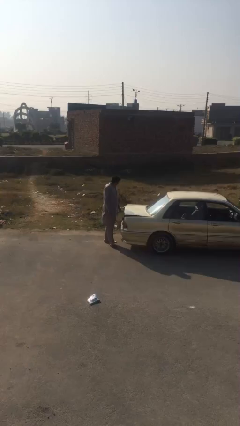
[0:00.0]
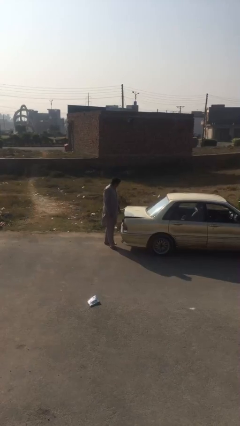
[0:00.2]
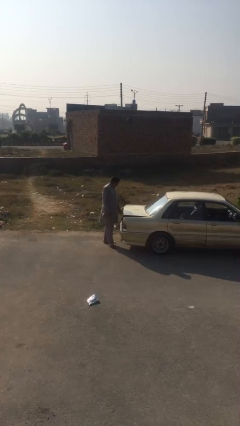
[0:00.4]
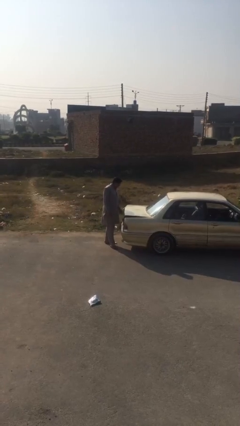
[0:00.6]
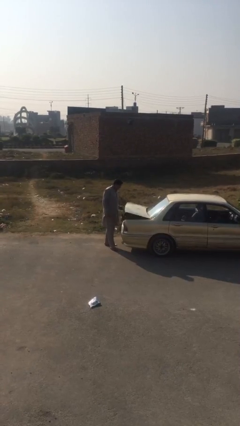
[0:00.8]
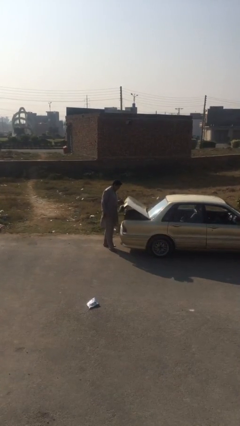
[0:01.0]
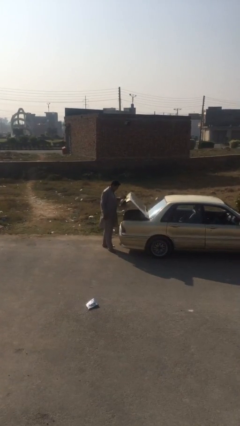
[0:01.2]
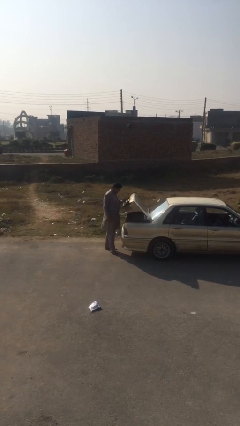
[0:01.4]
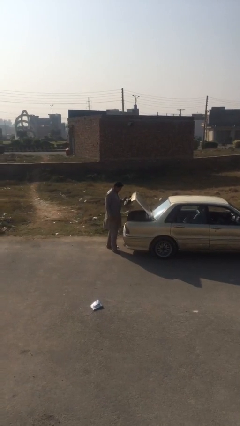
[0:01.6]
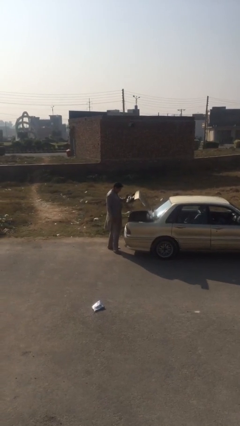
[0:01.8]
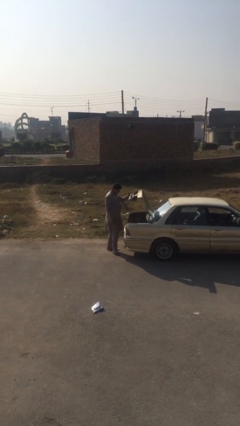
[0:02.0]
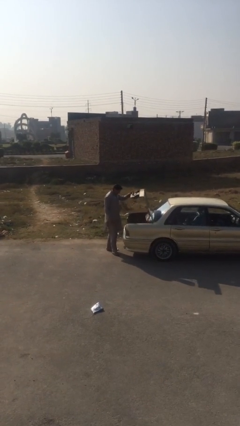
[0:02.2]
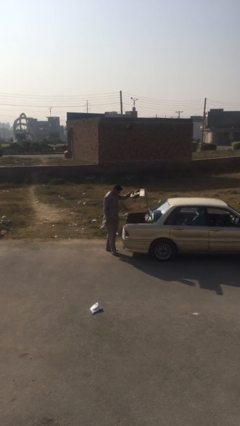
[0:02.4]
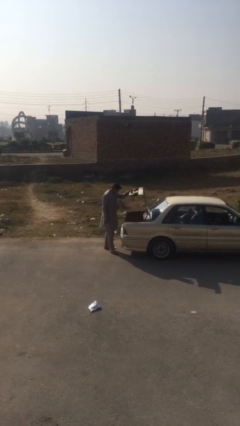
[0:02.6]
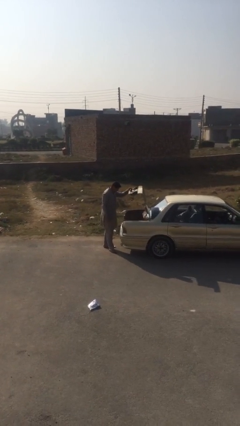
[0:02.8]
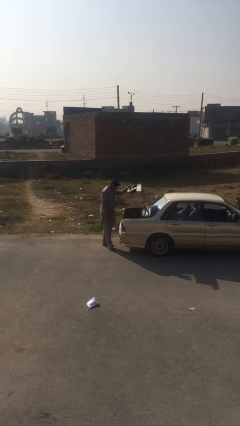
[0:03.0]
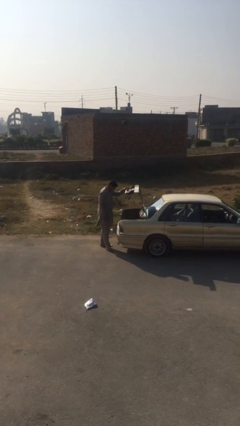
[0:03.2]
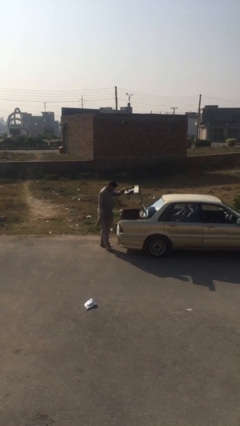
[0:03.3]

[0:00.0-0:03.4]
person opens car trunk

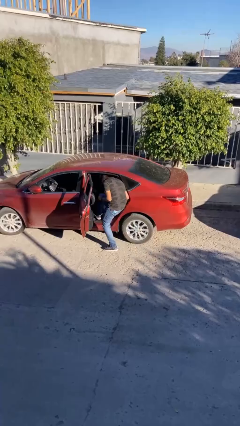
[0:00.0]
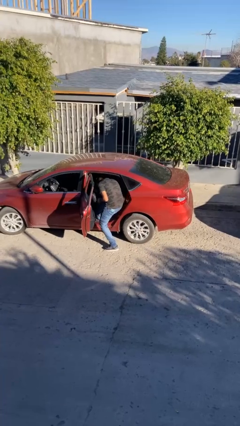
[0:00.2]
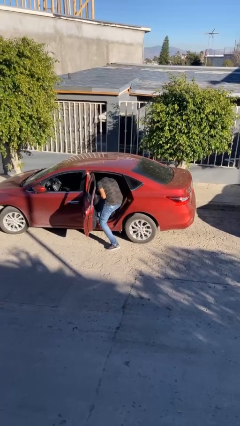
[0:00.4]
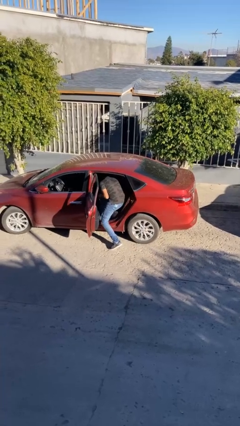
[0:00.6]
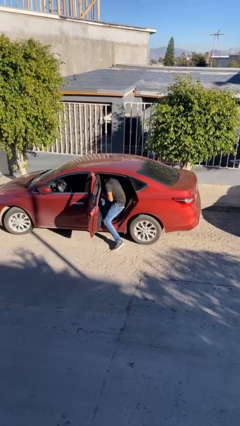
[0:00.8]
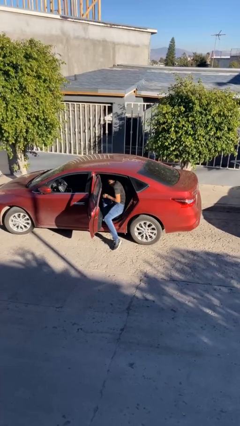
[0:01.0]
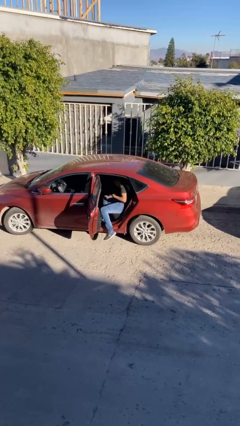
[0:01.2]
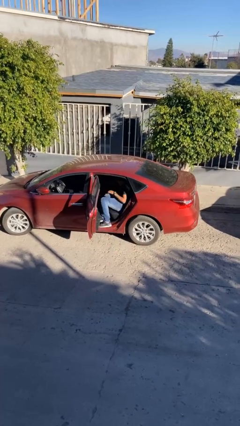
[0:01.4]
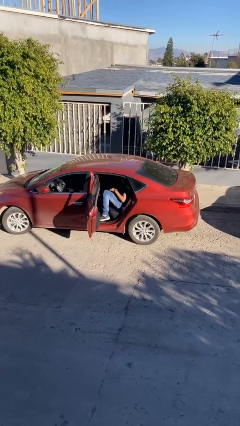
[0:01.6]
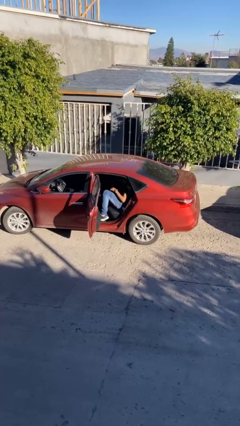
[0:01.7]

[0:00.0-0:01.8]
person enters car

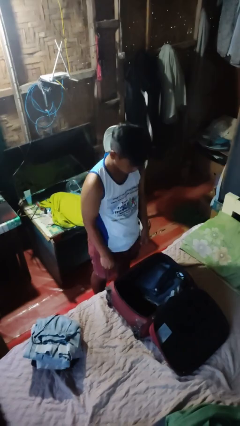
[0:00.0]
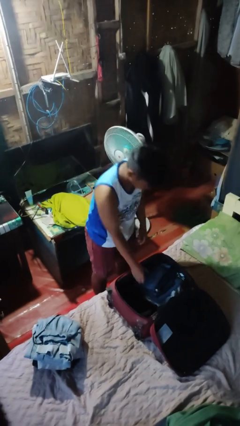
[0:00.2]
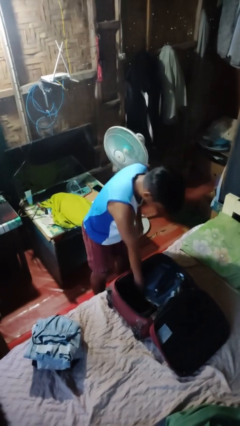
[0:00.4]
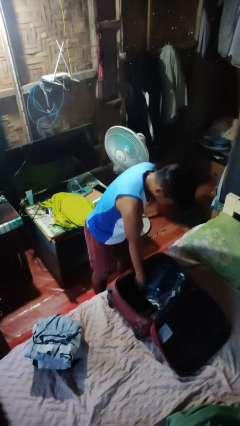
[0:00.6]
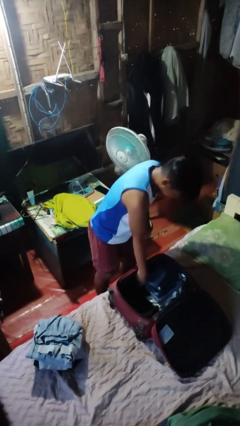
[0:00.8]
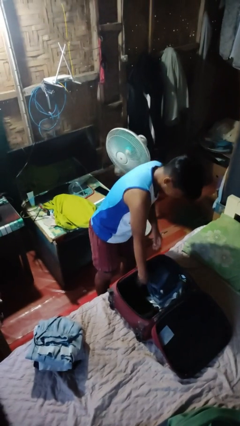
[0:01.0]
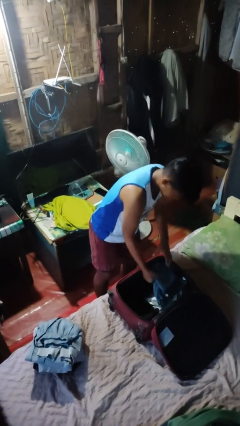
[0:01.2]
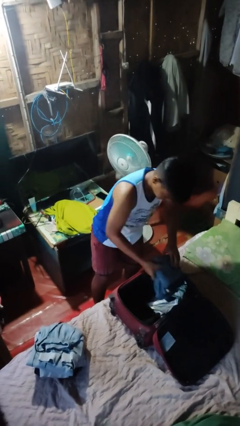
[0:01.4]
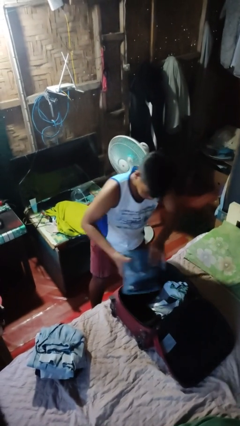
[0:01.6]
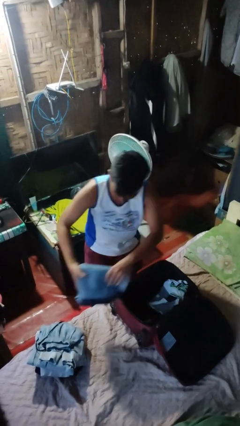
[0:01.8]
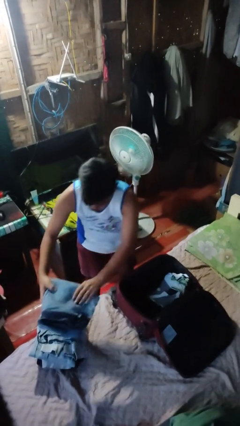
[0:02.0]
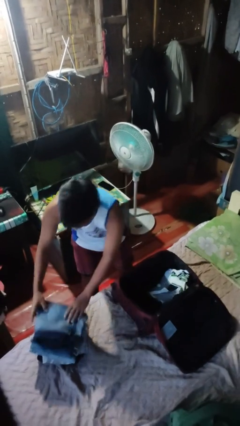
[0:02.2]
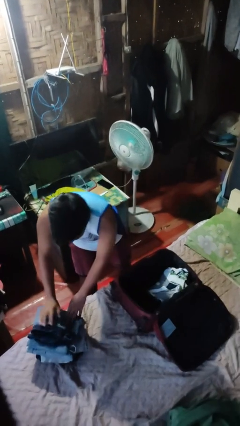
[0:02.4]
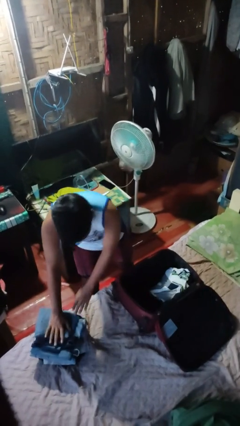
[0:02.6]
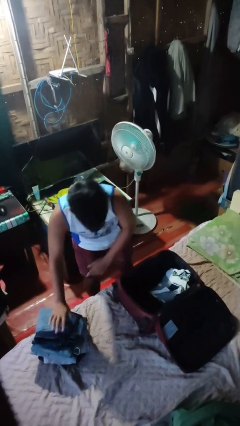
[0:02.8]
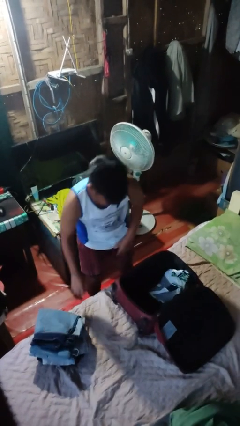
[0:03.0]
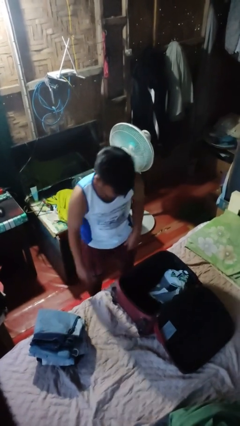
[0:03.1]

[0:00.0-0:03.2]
person unloads clothes from suitcase

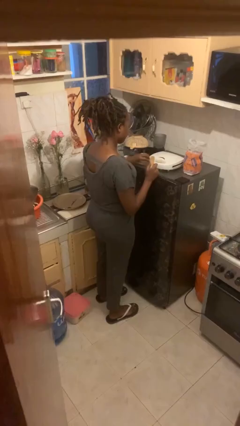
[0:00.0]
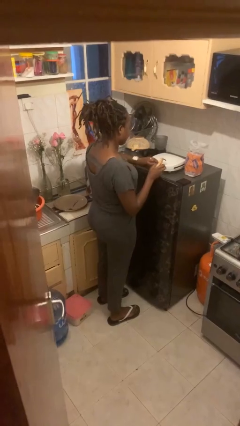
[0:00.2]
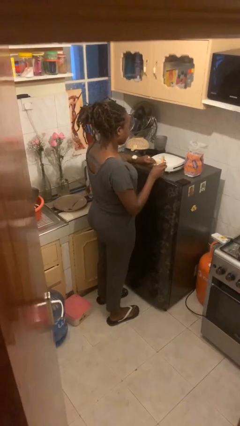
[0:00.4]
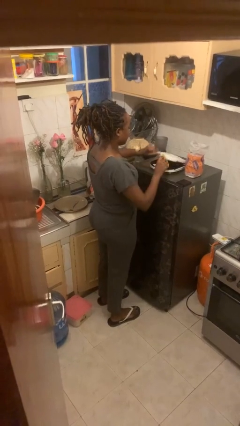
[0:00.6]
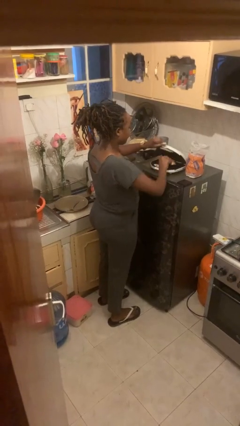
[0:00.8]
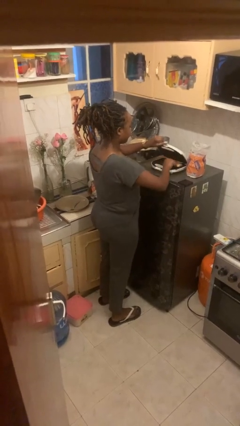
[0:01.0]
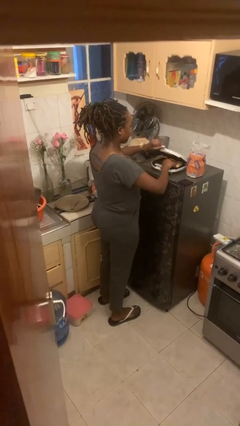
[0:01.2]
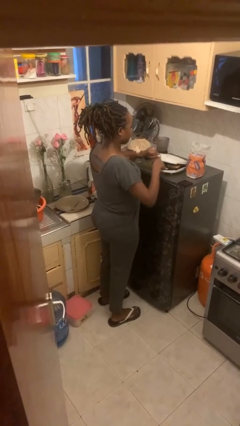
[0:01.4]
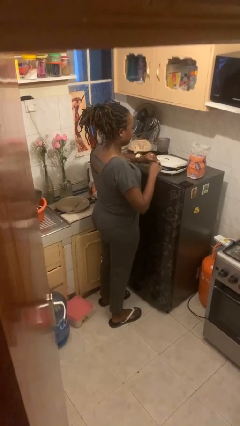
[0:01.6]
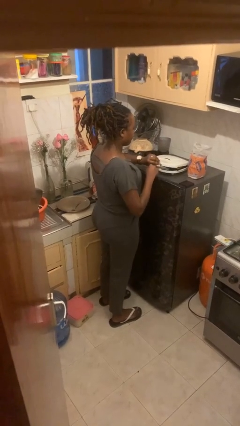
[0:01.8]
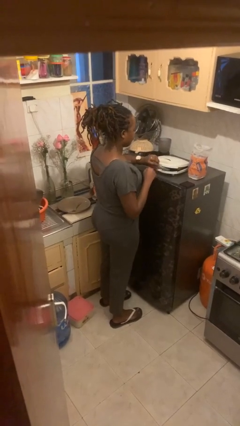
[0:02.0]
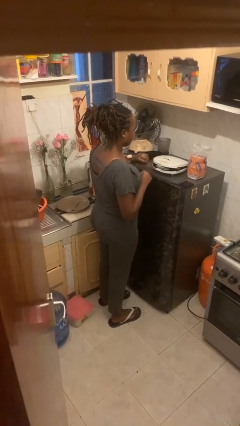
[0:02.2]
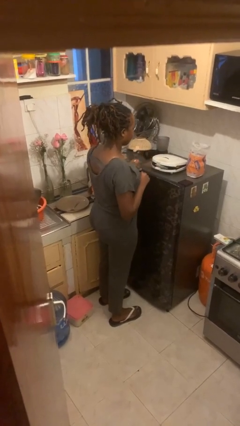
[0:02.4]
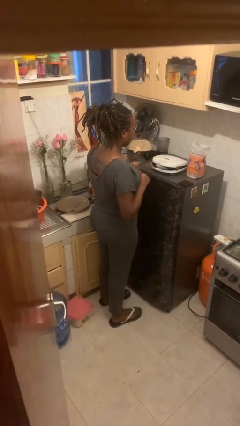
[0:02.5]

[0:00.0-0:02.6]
person puts object into toaster

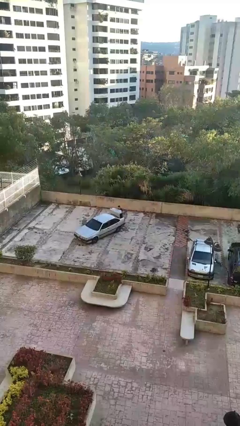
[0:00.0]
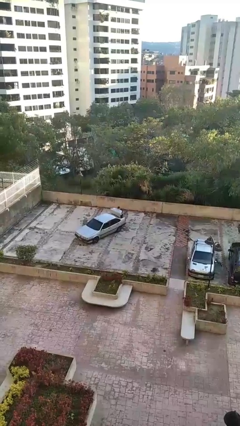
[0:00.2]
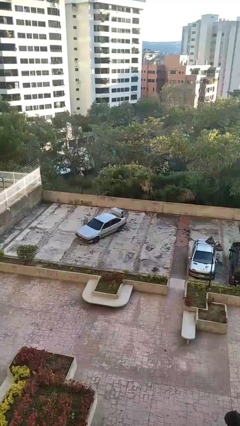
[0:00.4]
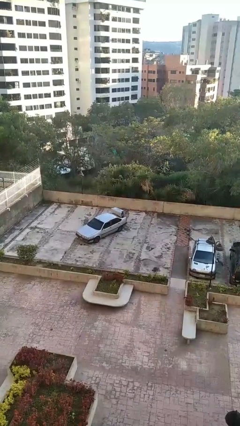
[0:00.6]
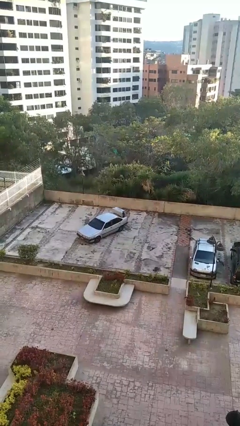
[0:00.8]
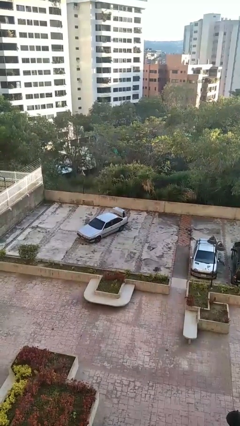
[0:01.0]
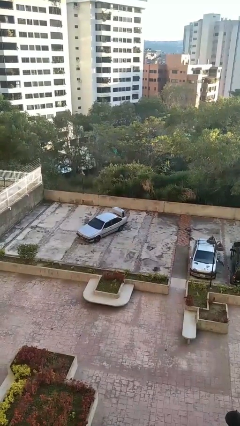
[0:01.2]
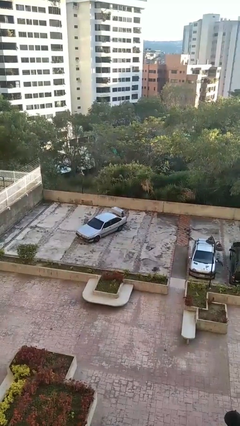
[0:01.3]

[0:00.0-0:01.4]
person loads car

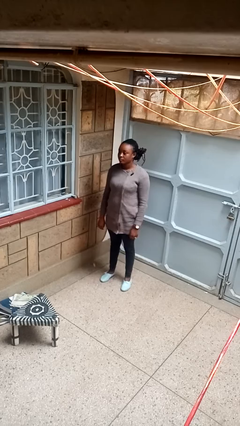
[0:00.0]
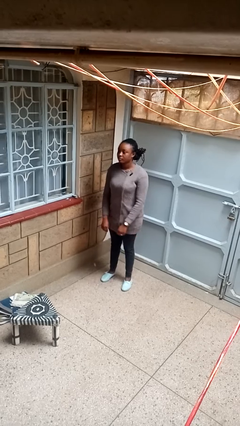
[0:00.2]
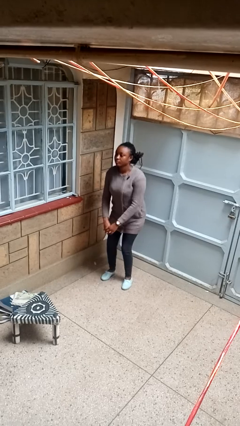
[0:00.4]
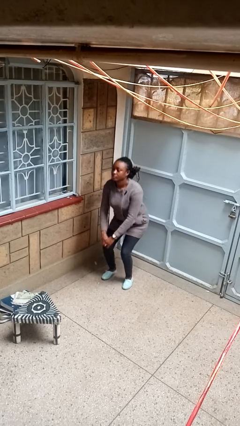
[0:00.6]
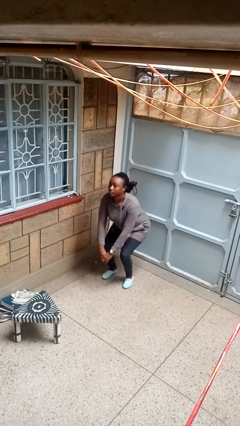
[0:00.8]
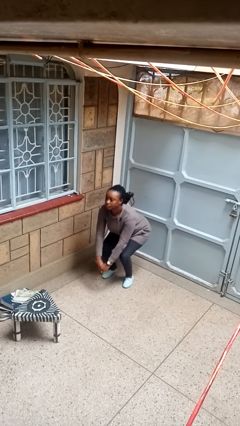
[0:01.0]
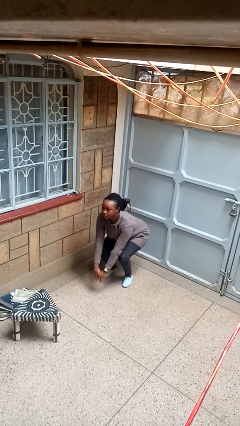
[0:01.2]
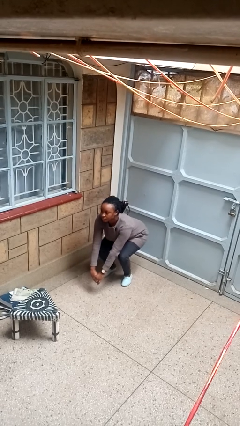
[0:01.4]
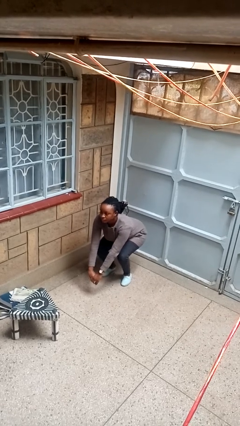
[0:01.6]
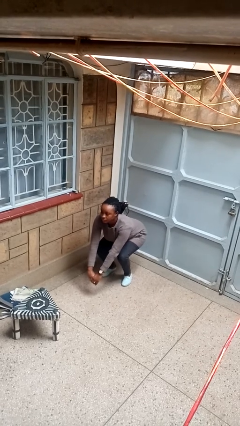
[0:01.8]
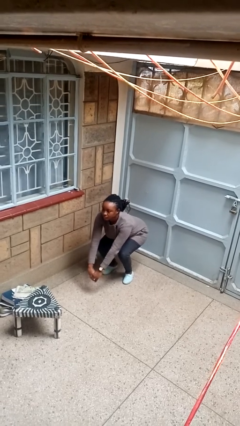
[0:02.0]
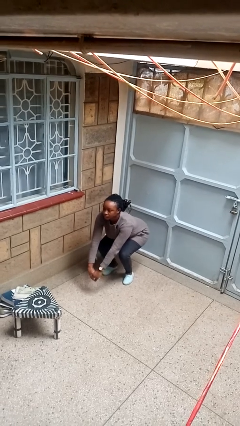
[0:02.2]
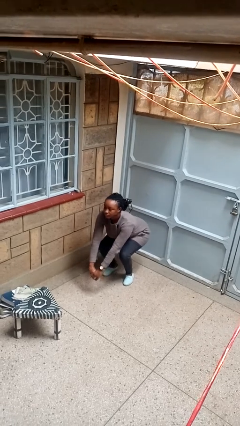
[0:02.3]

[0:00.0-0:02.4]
person squats

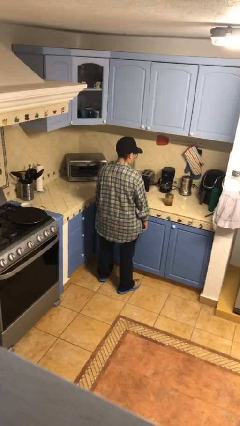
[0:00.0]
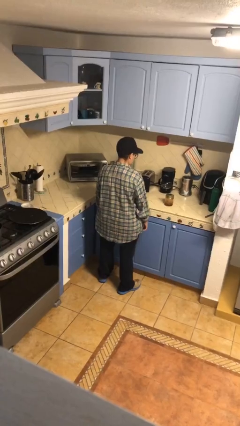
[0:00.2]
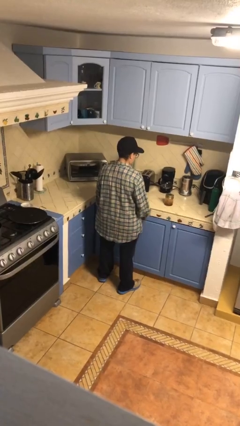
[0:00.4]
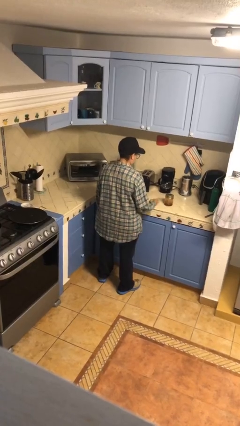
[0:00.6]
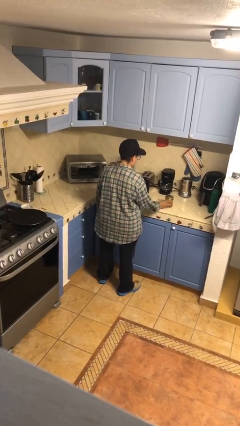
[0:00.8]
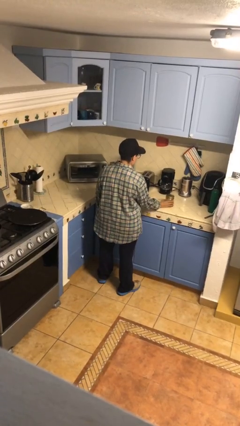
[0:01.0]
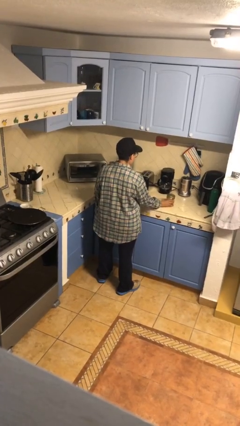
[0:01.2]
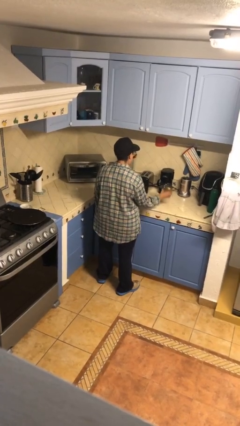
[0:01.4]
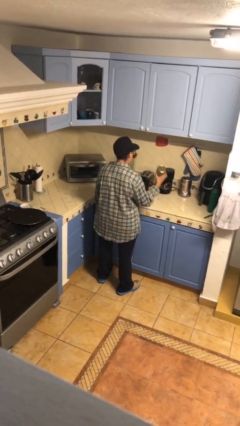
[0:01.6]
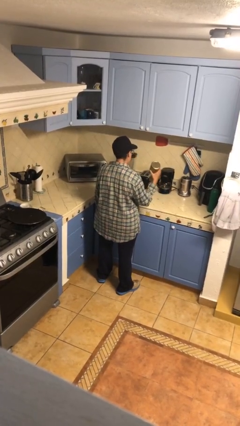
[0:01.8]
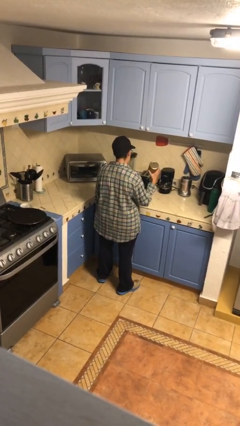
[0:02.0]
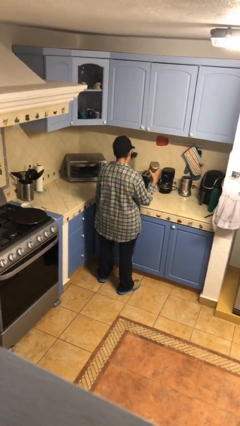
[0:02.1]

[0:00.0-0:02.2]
person picks up object from countertop
